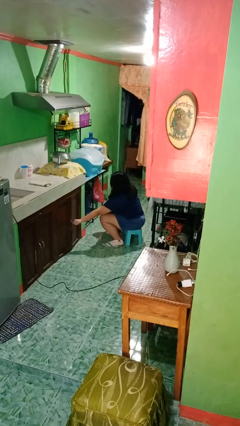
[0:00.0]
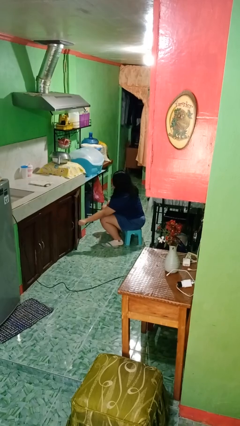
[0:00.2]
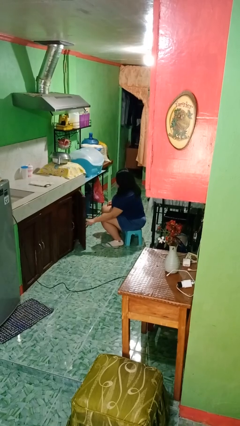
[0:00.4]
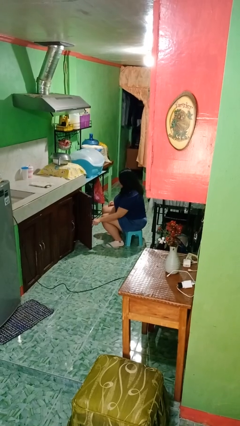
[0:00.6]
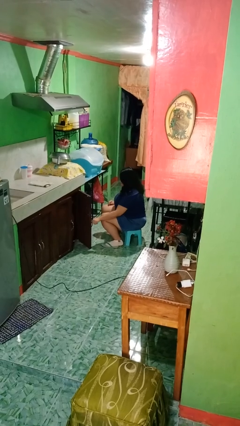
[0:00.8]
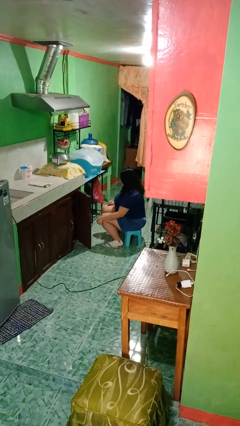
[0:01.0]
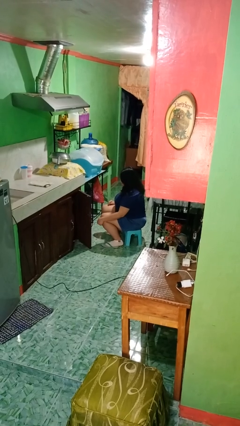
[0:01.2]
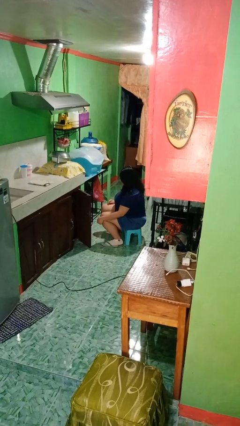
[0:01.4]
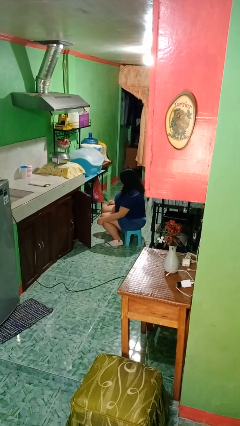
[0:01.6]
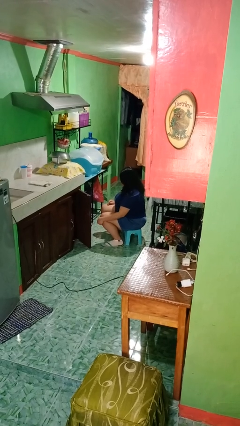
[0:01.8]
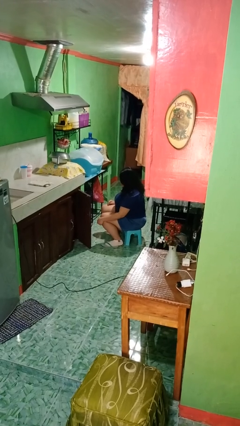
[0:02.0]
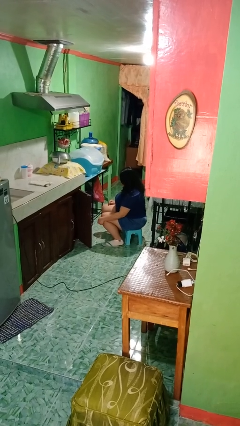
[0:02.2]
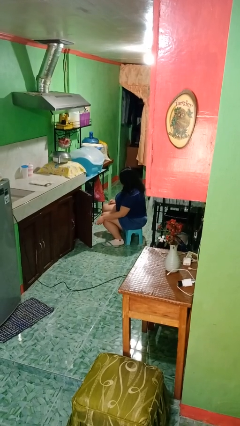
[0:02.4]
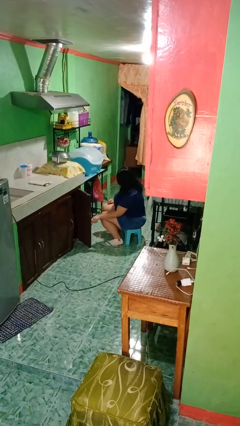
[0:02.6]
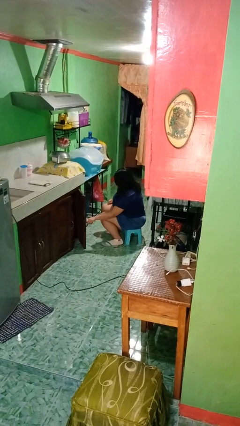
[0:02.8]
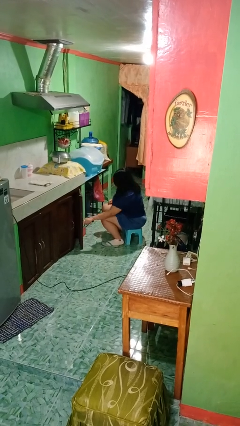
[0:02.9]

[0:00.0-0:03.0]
person opens cabinet

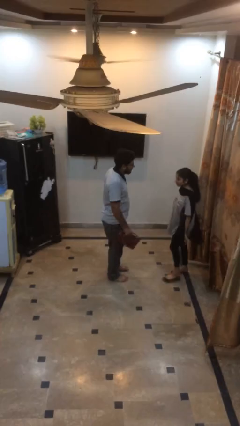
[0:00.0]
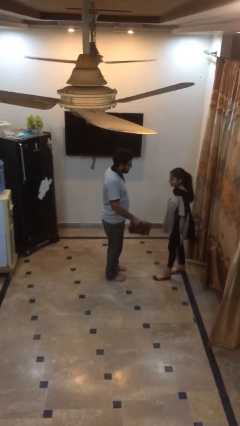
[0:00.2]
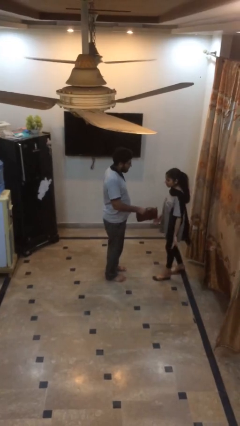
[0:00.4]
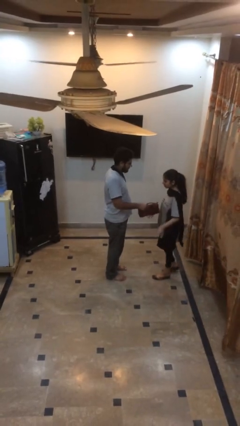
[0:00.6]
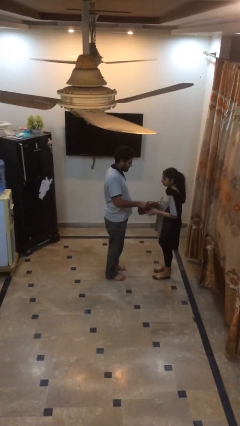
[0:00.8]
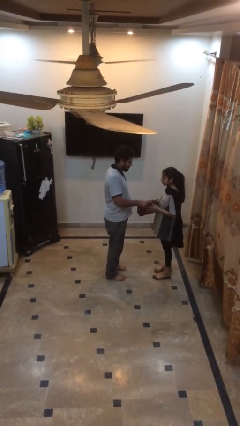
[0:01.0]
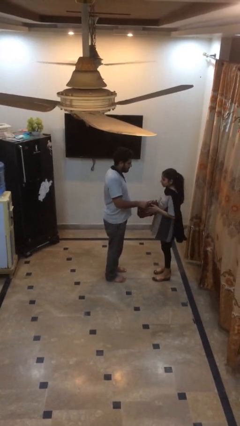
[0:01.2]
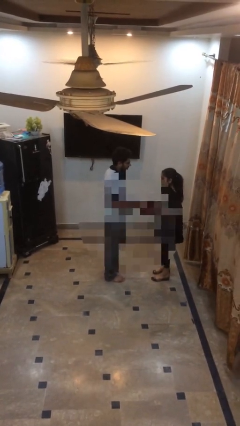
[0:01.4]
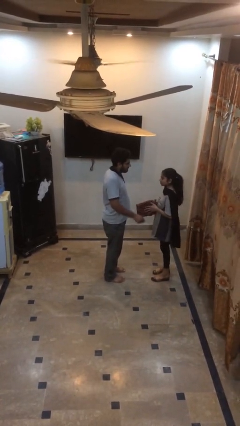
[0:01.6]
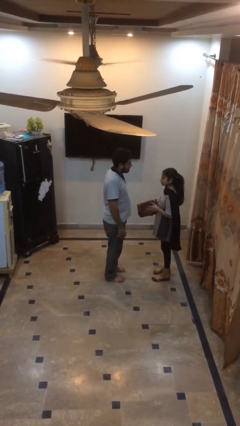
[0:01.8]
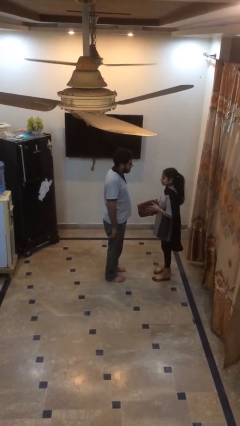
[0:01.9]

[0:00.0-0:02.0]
person transfers object to person

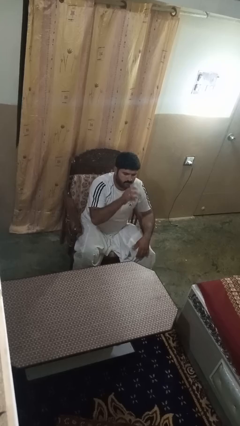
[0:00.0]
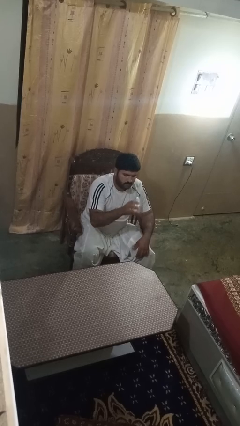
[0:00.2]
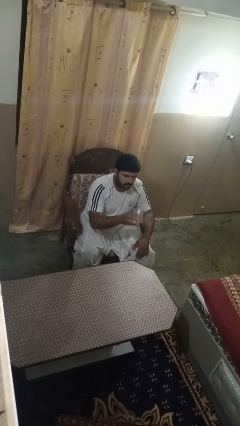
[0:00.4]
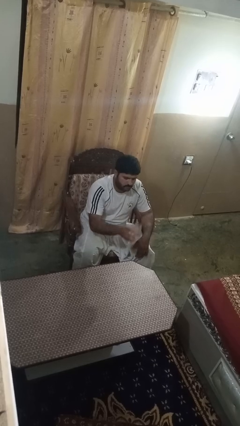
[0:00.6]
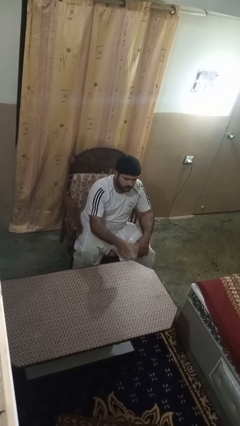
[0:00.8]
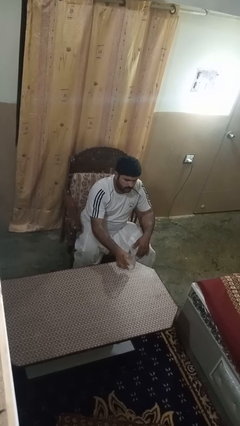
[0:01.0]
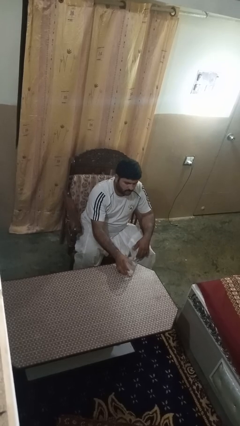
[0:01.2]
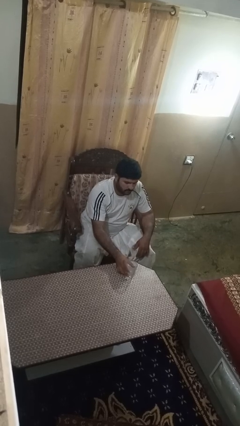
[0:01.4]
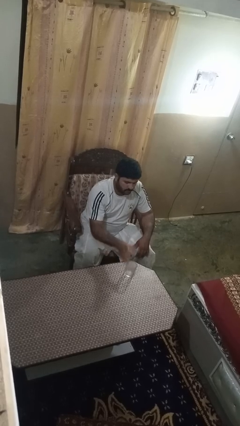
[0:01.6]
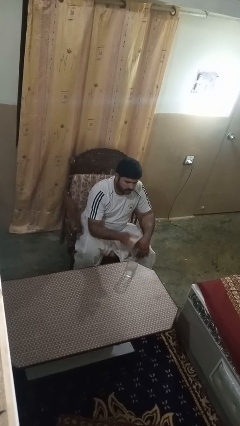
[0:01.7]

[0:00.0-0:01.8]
person puts down object on table

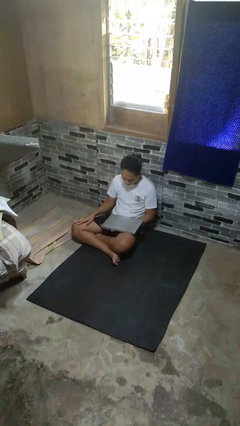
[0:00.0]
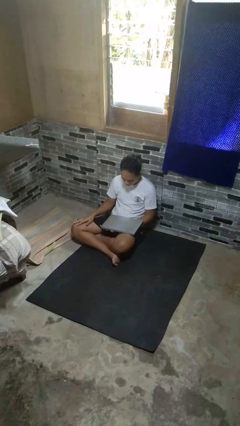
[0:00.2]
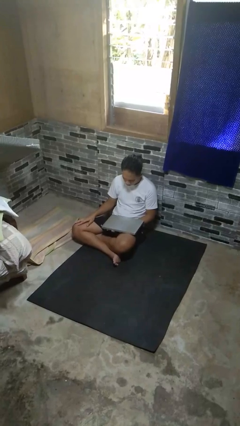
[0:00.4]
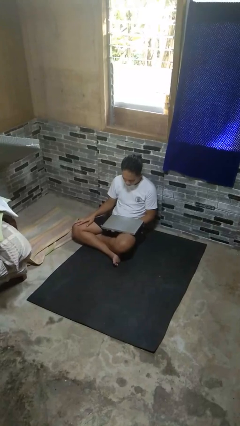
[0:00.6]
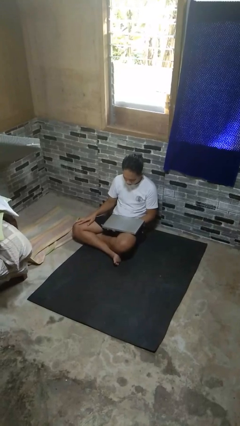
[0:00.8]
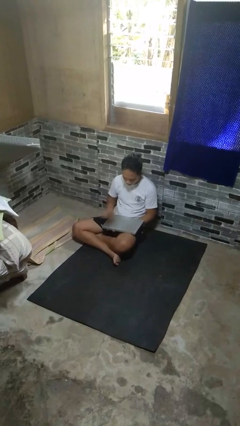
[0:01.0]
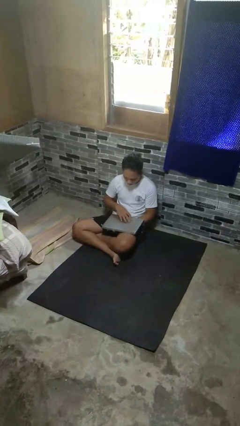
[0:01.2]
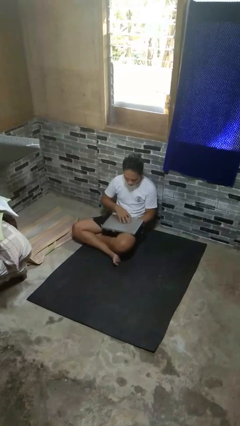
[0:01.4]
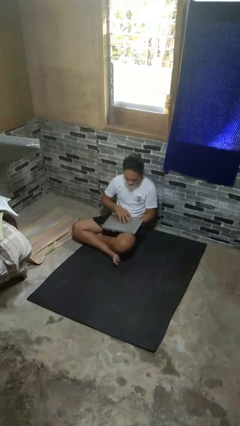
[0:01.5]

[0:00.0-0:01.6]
person opens laptop

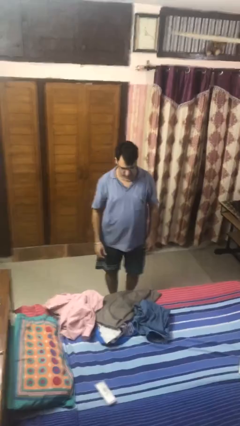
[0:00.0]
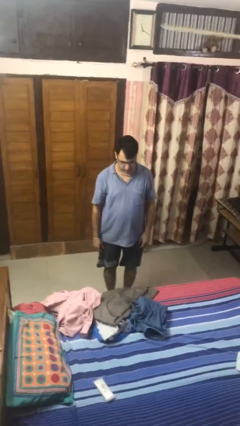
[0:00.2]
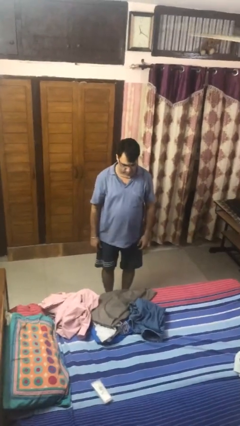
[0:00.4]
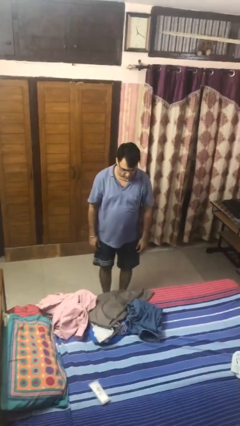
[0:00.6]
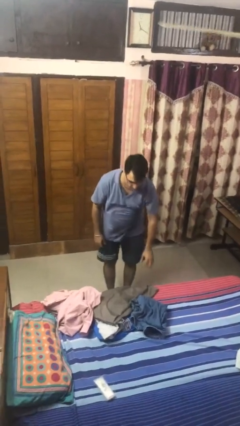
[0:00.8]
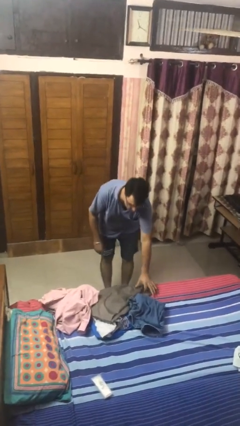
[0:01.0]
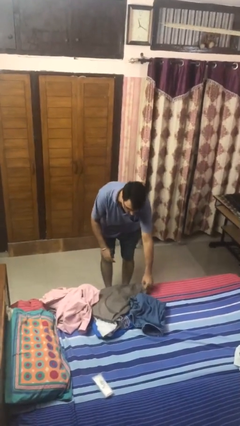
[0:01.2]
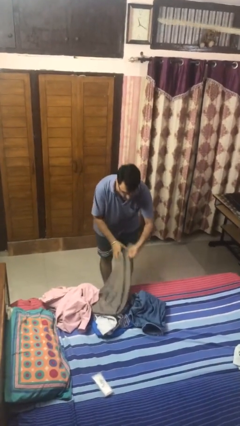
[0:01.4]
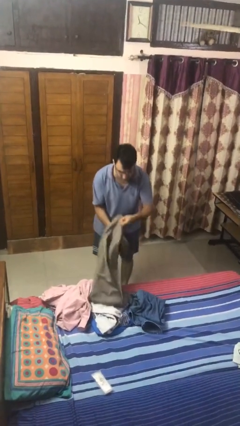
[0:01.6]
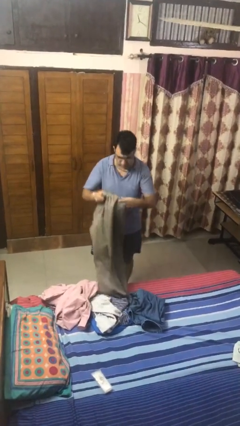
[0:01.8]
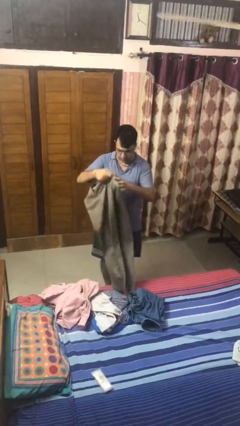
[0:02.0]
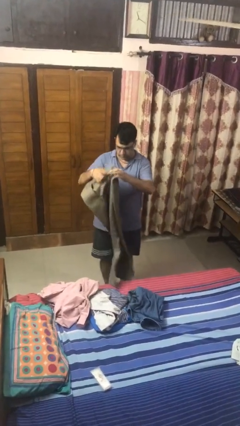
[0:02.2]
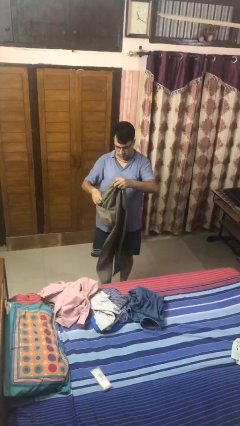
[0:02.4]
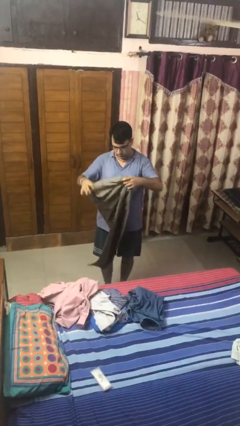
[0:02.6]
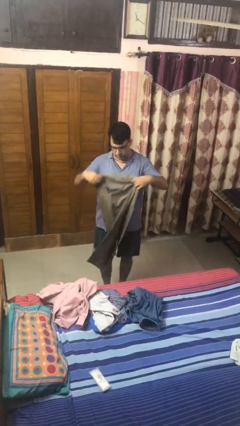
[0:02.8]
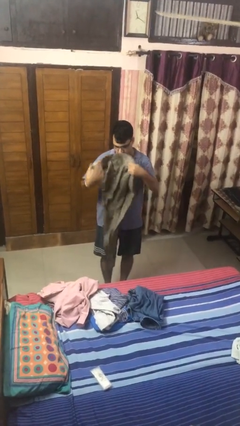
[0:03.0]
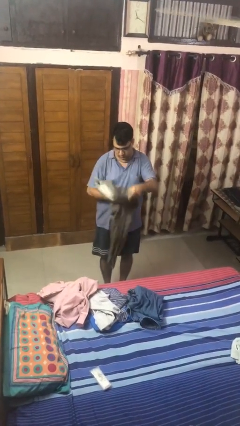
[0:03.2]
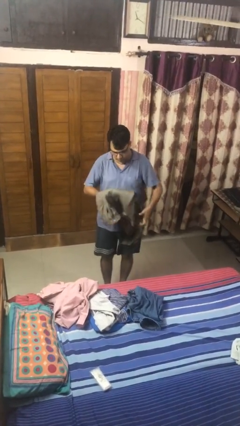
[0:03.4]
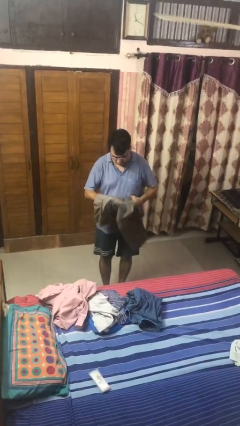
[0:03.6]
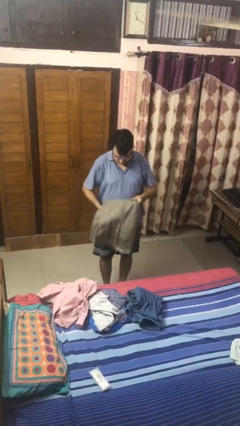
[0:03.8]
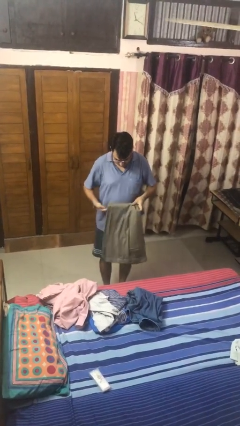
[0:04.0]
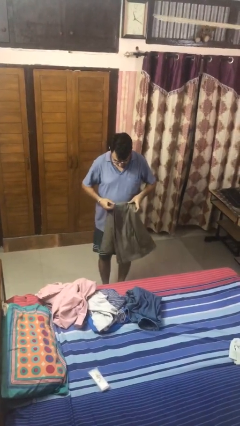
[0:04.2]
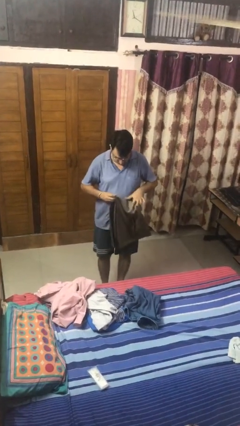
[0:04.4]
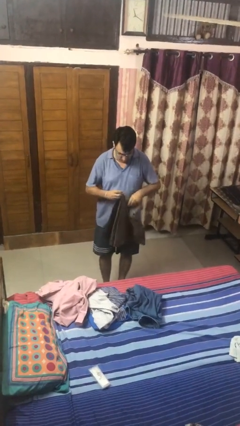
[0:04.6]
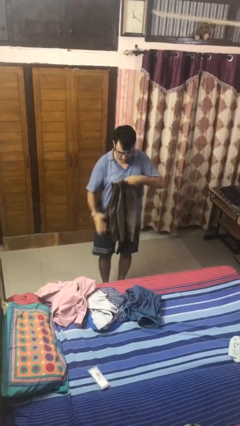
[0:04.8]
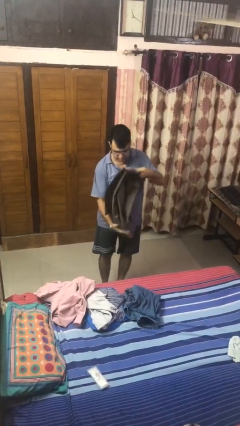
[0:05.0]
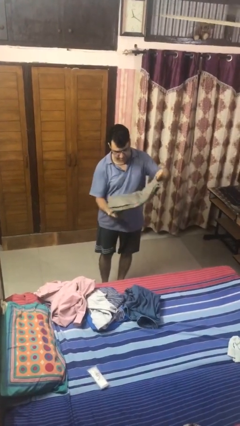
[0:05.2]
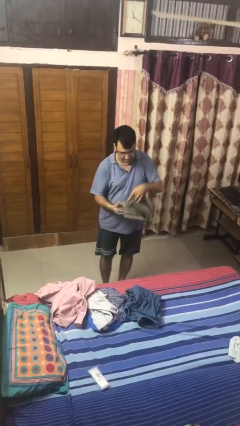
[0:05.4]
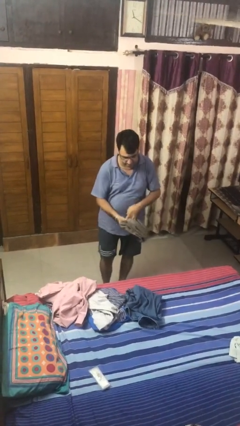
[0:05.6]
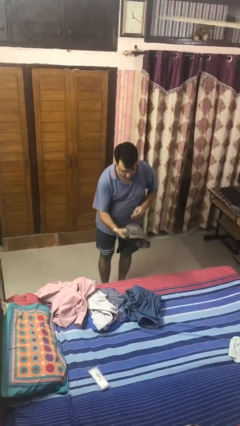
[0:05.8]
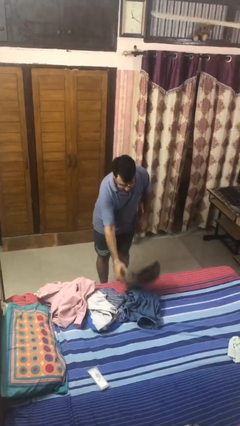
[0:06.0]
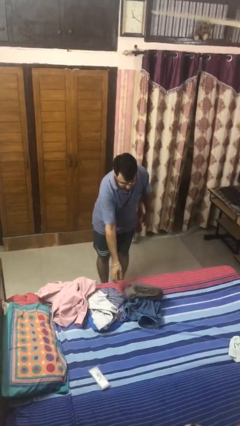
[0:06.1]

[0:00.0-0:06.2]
person folds pants

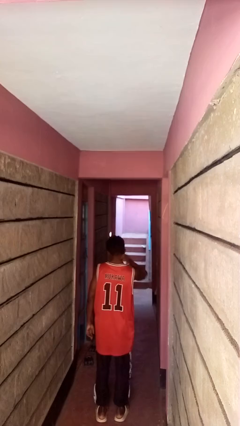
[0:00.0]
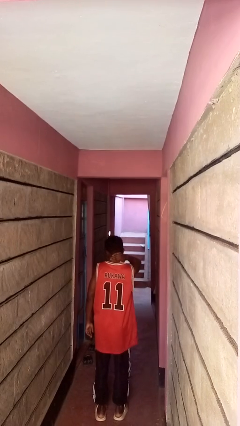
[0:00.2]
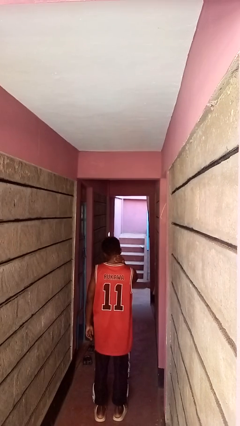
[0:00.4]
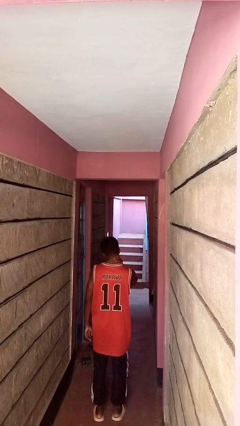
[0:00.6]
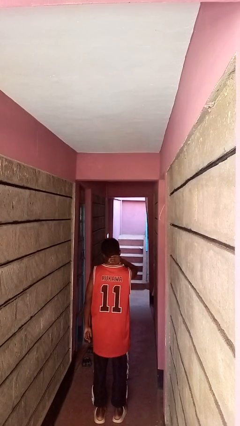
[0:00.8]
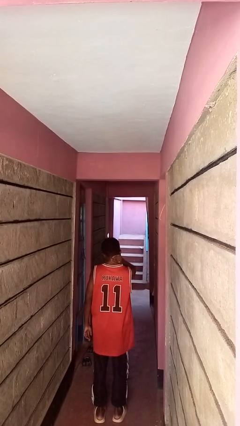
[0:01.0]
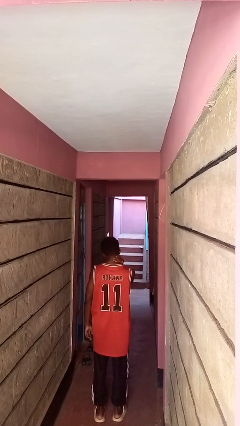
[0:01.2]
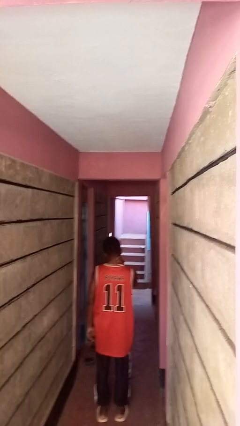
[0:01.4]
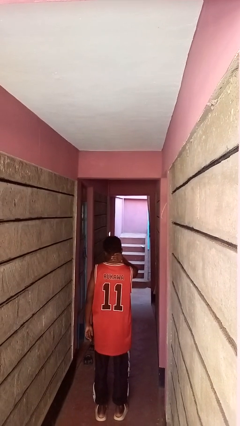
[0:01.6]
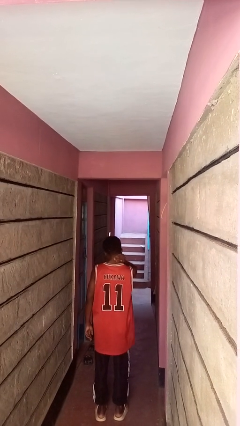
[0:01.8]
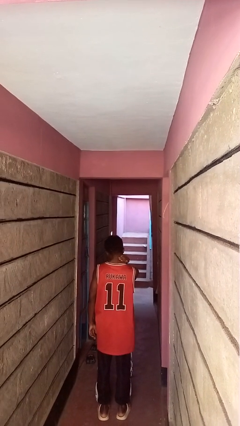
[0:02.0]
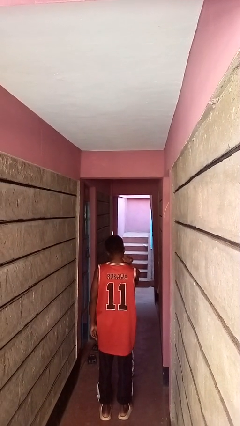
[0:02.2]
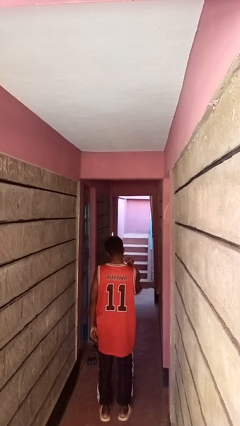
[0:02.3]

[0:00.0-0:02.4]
person rubs neck

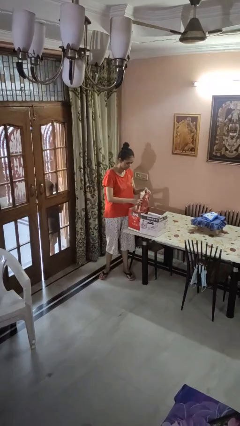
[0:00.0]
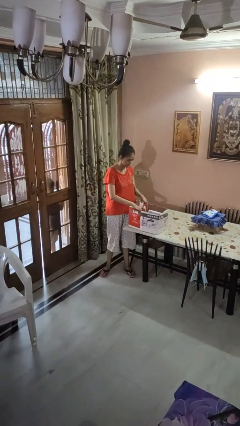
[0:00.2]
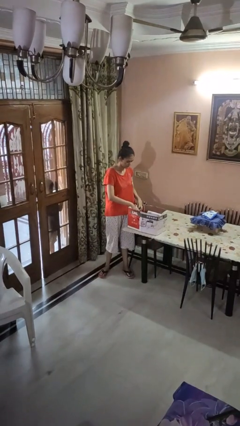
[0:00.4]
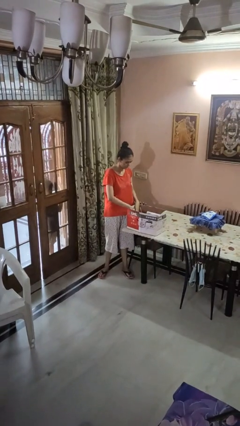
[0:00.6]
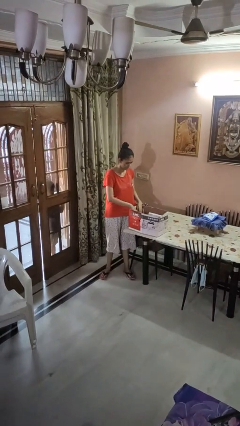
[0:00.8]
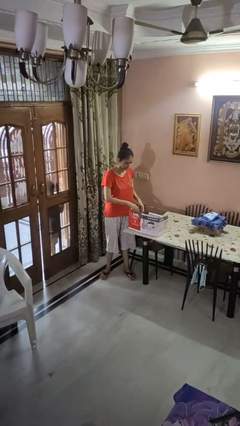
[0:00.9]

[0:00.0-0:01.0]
person puts object into box
